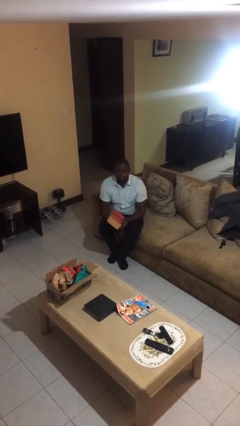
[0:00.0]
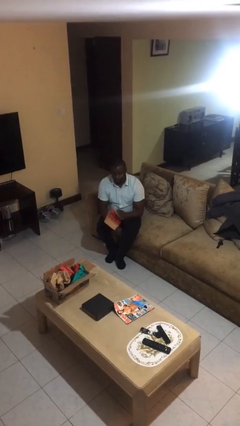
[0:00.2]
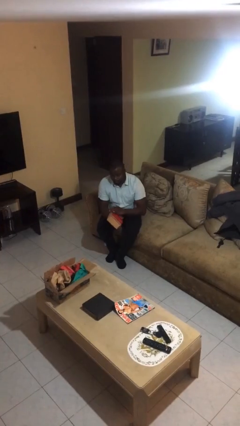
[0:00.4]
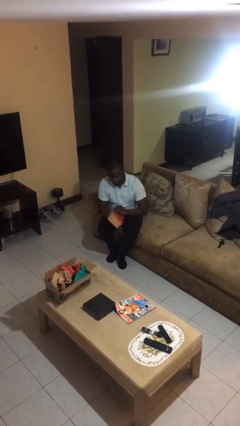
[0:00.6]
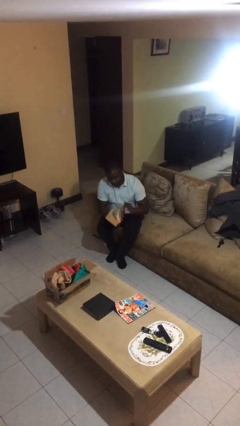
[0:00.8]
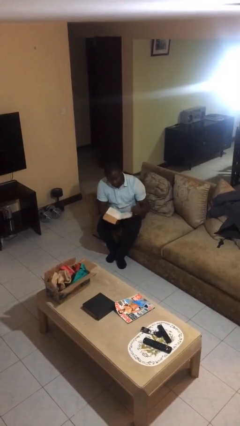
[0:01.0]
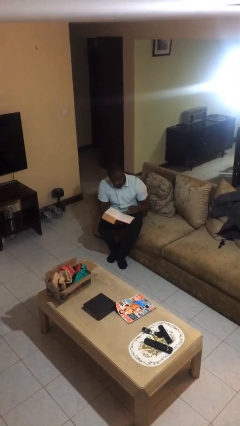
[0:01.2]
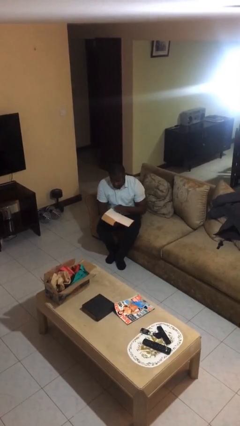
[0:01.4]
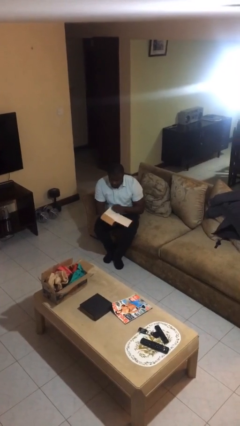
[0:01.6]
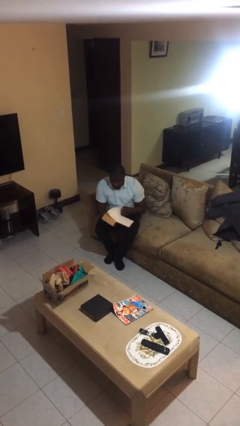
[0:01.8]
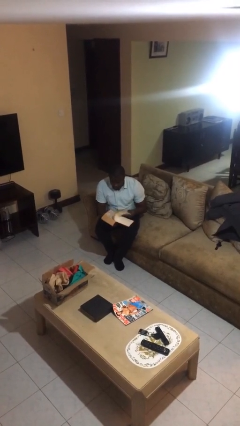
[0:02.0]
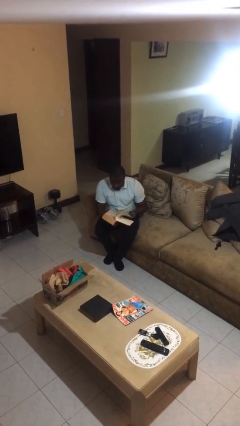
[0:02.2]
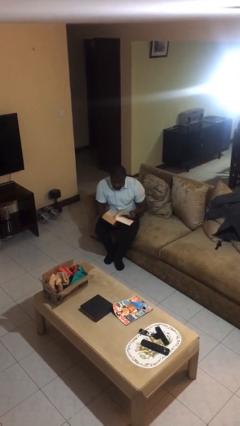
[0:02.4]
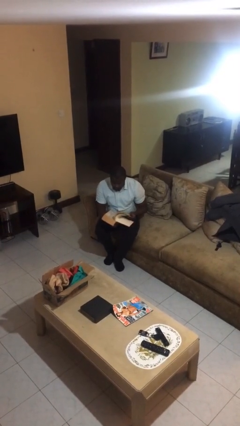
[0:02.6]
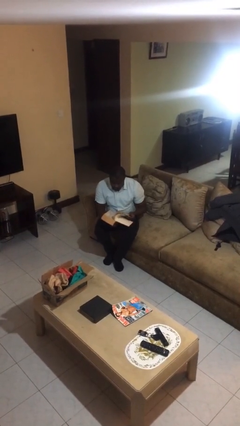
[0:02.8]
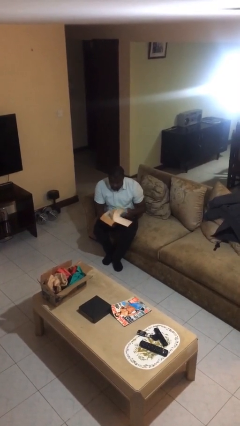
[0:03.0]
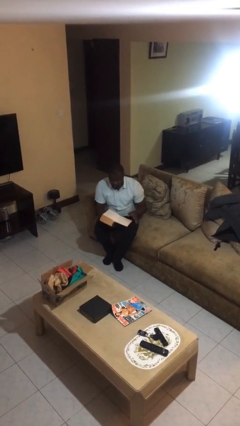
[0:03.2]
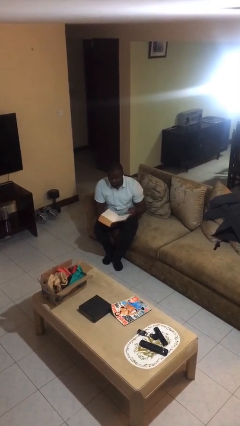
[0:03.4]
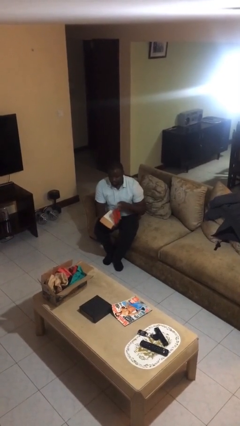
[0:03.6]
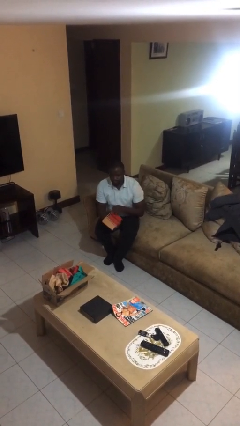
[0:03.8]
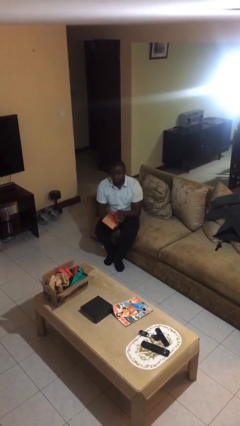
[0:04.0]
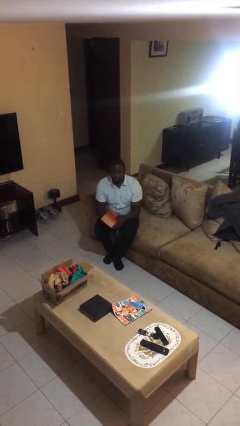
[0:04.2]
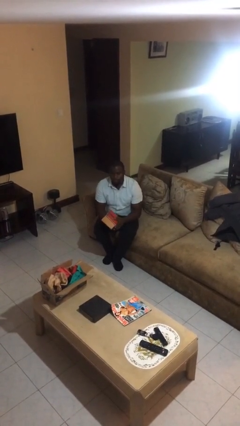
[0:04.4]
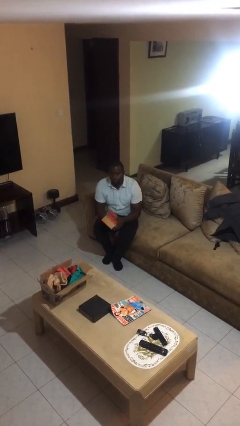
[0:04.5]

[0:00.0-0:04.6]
person reads book

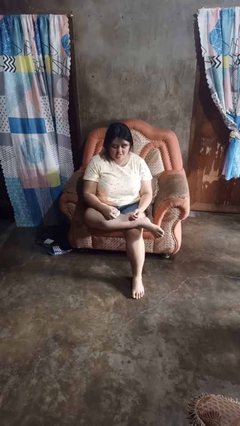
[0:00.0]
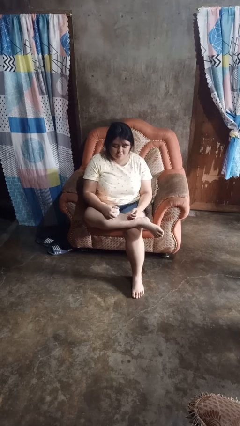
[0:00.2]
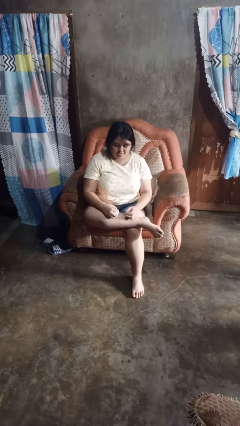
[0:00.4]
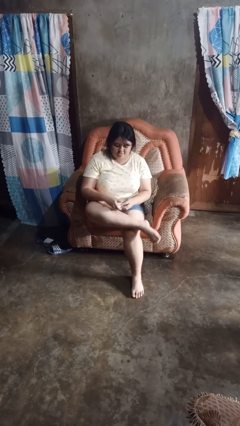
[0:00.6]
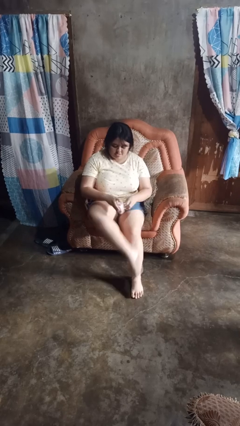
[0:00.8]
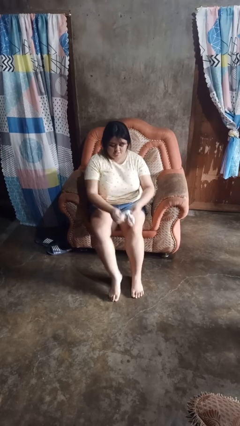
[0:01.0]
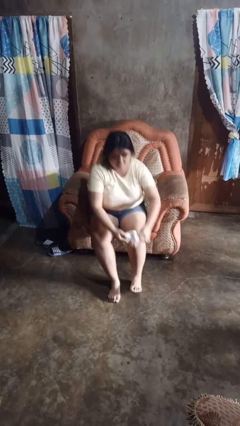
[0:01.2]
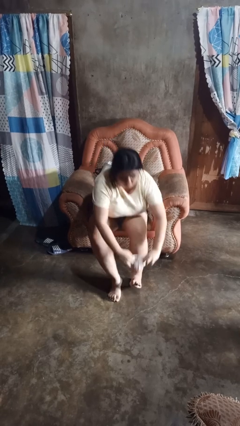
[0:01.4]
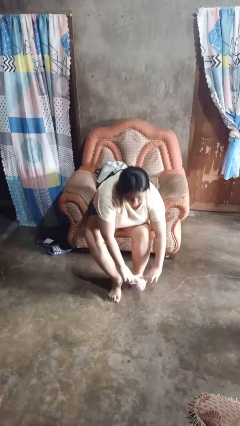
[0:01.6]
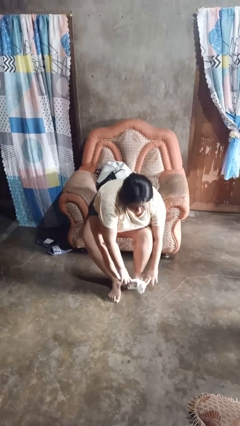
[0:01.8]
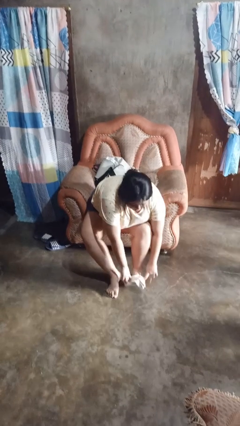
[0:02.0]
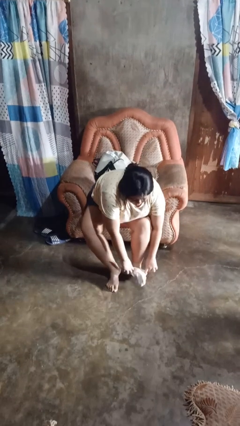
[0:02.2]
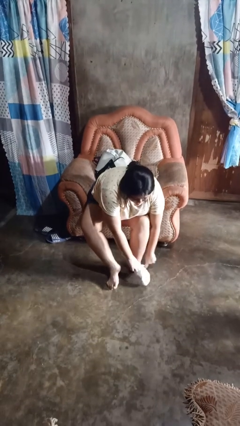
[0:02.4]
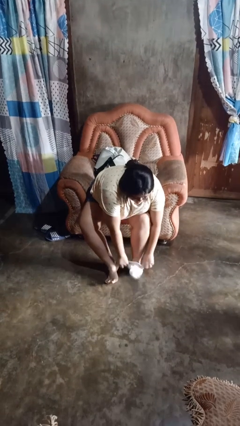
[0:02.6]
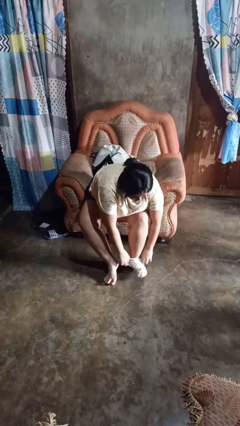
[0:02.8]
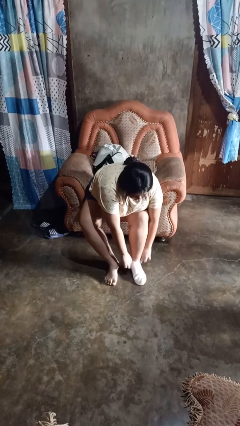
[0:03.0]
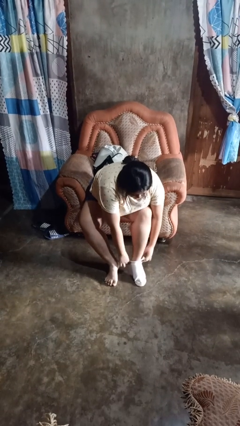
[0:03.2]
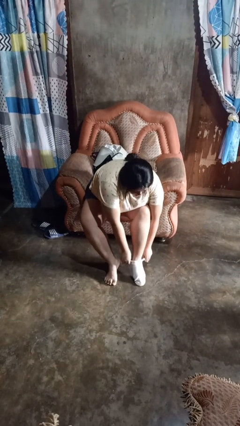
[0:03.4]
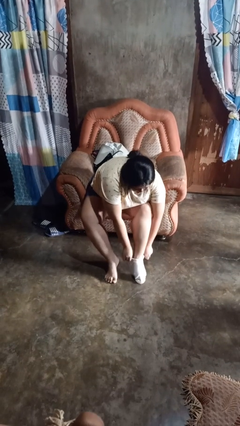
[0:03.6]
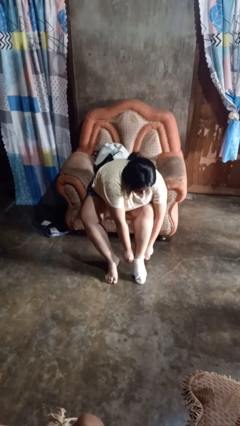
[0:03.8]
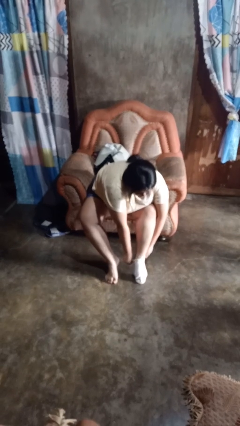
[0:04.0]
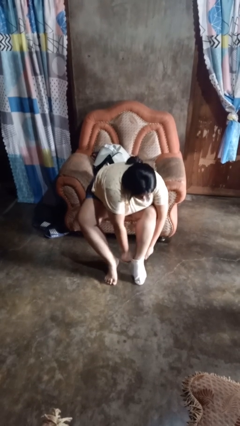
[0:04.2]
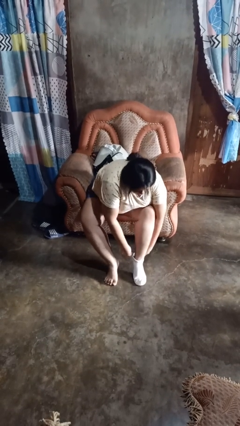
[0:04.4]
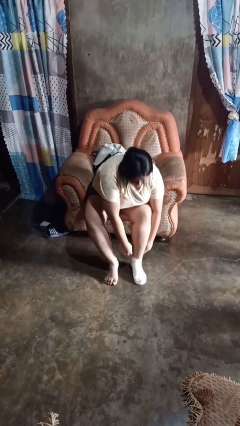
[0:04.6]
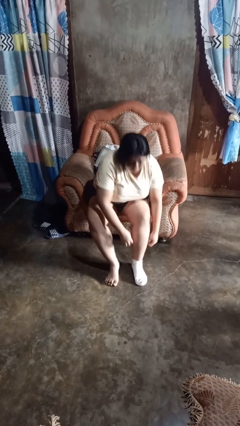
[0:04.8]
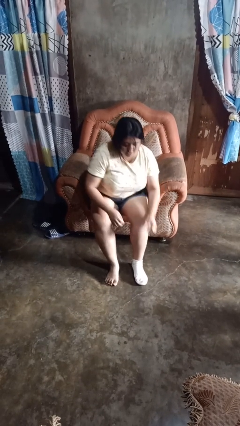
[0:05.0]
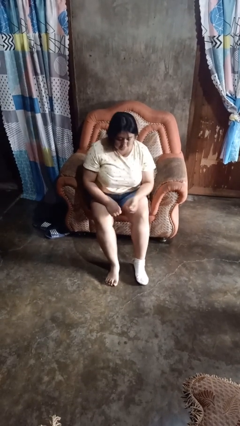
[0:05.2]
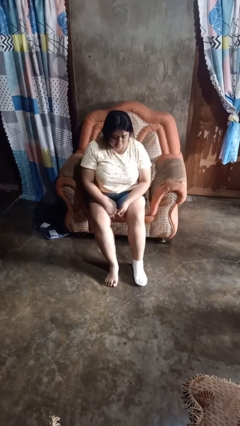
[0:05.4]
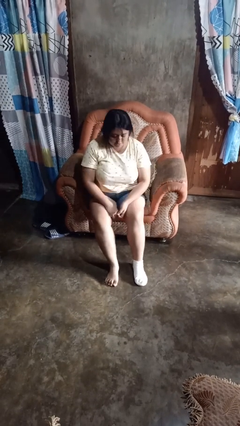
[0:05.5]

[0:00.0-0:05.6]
person puts on socks

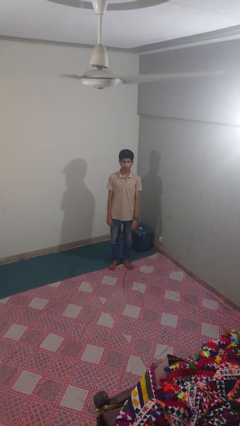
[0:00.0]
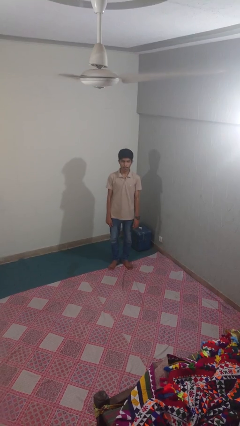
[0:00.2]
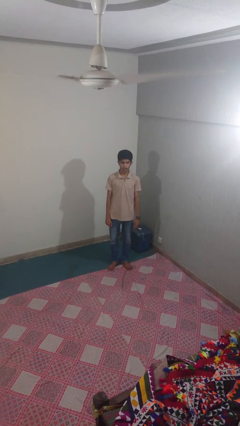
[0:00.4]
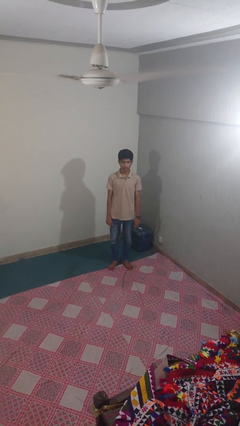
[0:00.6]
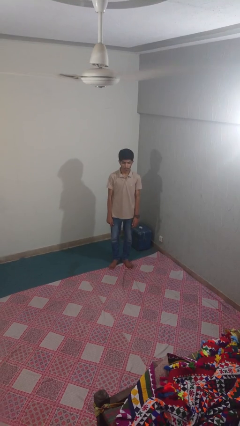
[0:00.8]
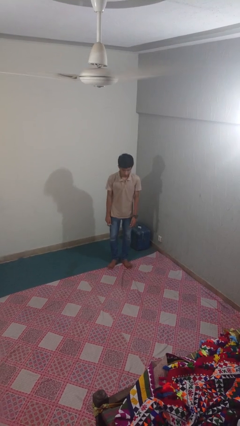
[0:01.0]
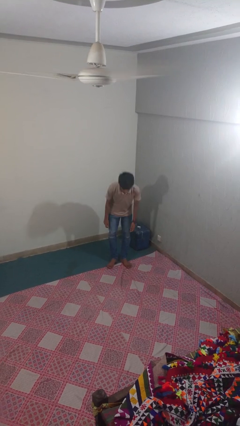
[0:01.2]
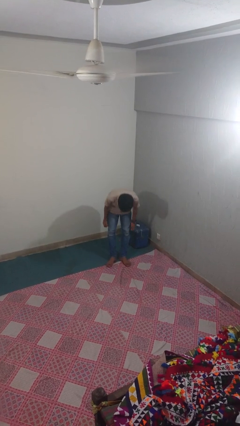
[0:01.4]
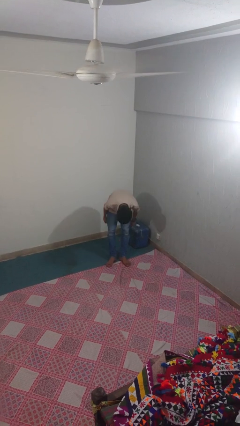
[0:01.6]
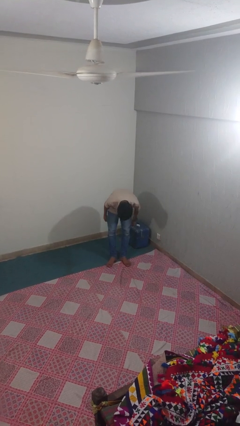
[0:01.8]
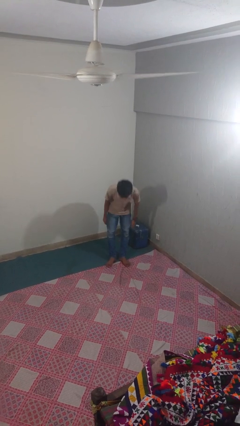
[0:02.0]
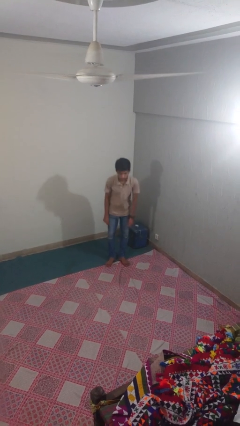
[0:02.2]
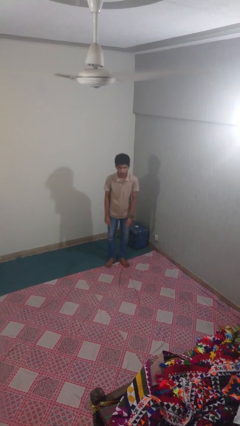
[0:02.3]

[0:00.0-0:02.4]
person bows

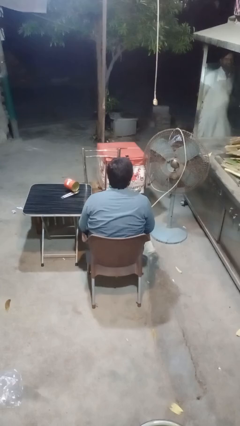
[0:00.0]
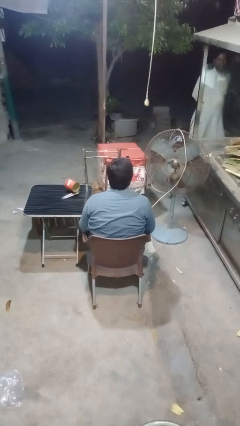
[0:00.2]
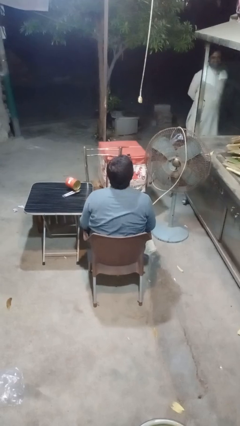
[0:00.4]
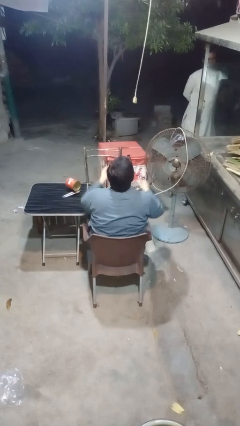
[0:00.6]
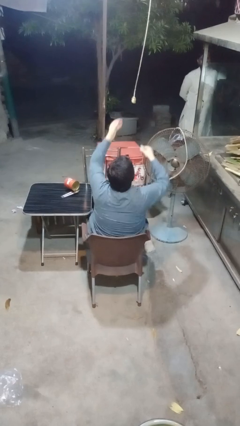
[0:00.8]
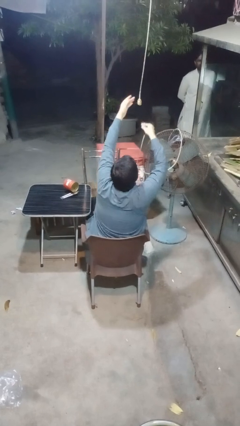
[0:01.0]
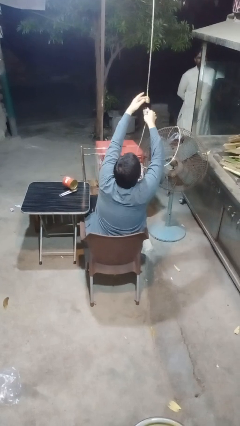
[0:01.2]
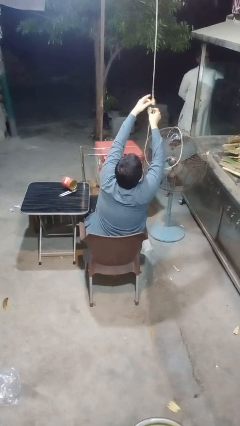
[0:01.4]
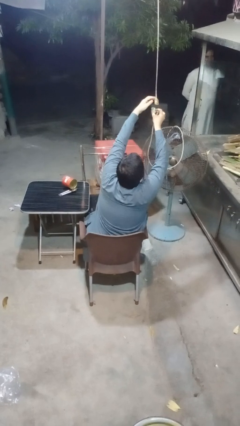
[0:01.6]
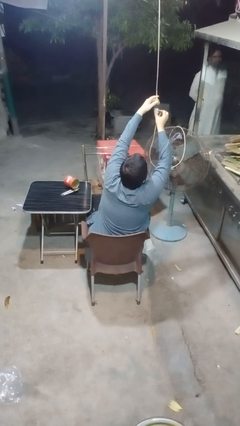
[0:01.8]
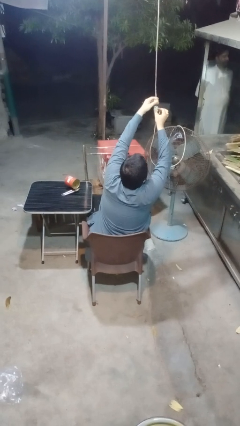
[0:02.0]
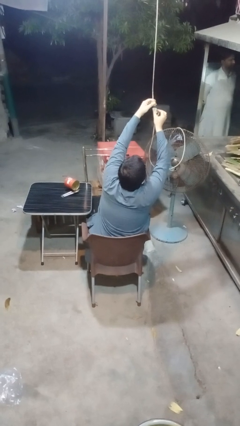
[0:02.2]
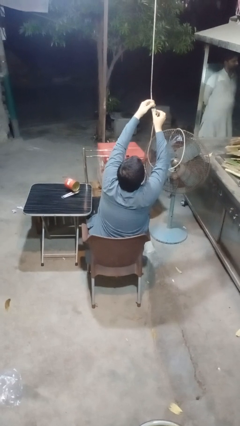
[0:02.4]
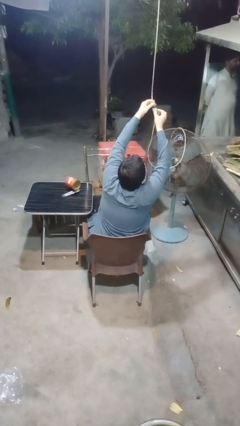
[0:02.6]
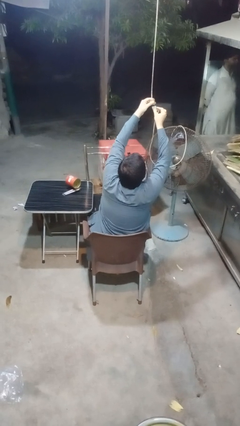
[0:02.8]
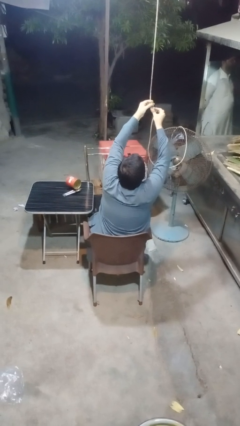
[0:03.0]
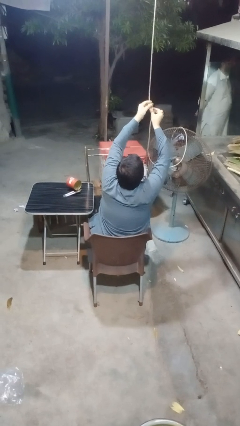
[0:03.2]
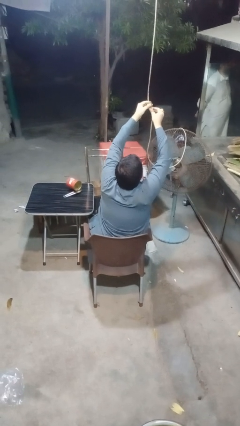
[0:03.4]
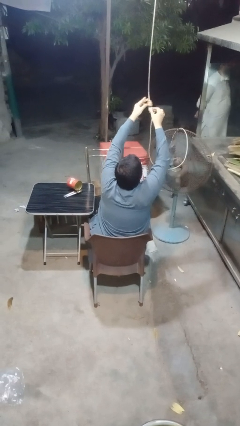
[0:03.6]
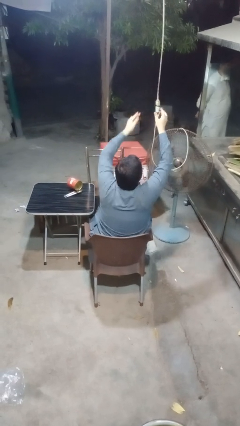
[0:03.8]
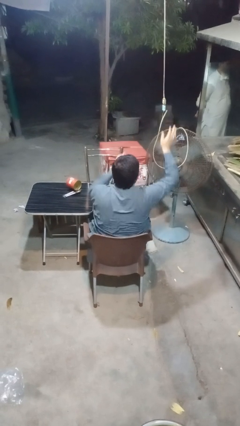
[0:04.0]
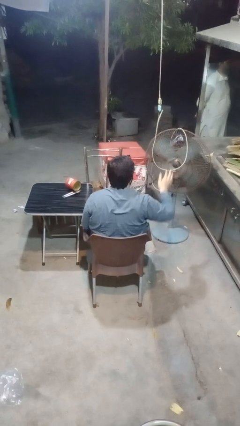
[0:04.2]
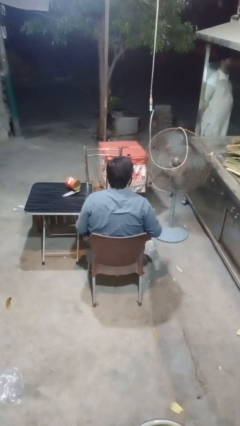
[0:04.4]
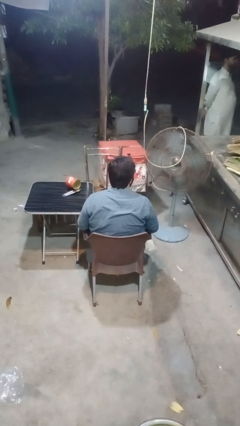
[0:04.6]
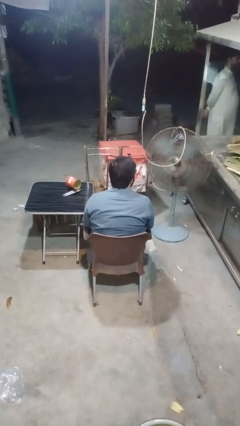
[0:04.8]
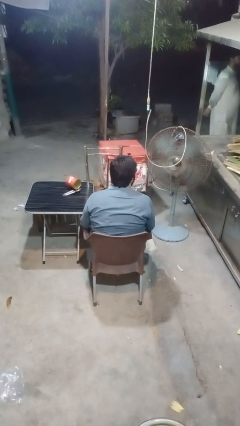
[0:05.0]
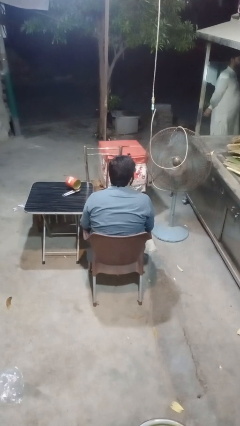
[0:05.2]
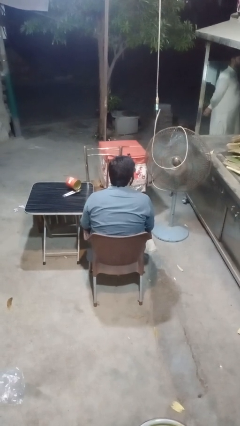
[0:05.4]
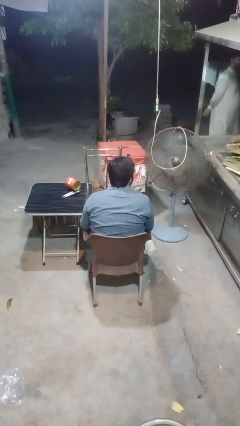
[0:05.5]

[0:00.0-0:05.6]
person turns on fan
